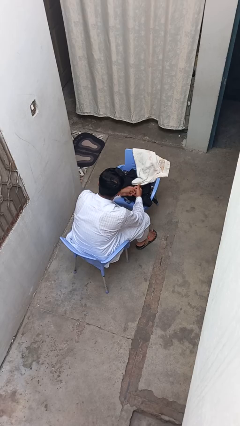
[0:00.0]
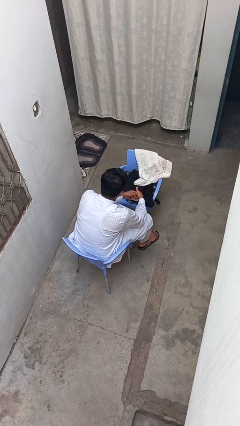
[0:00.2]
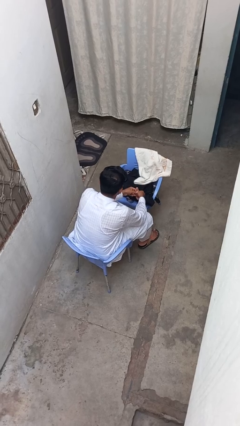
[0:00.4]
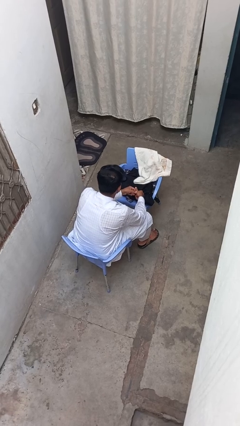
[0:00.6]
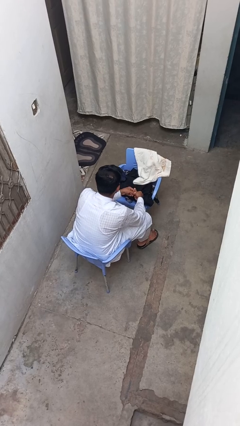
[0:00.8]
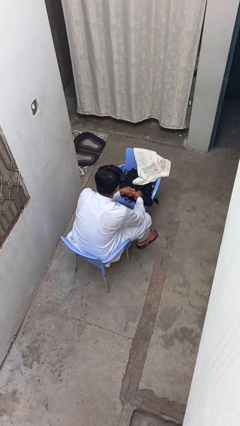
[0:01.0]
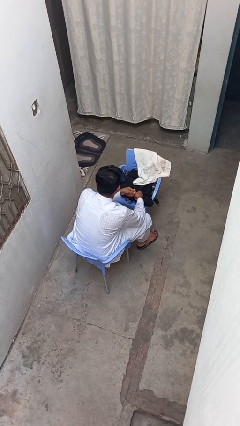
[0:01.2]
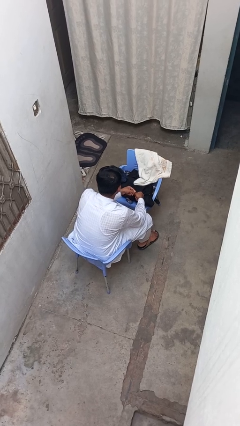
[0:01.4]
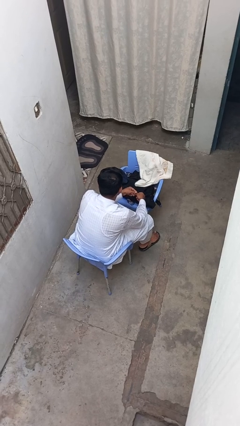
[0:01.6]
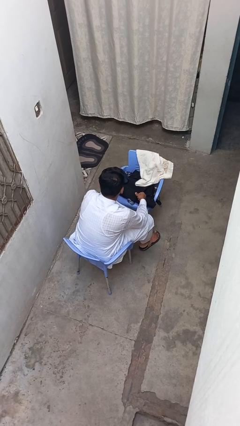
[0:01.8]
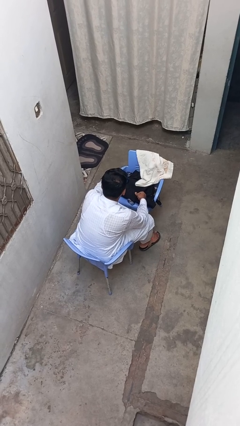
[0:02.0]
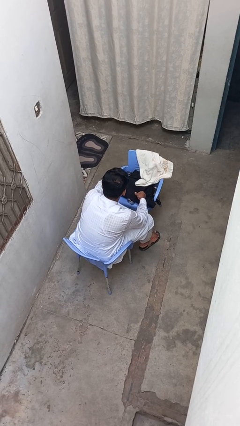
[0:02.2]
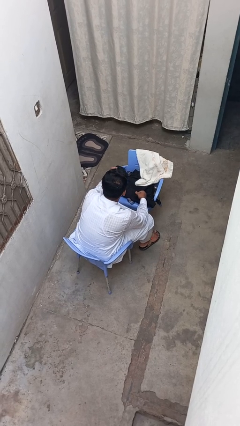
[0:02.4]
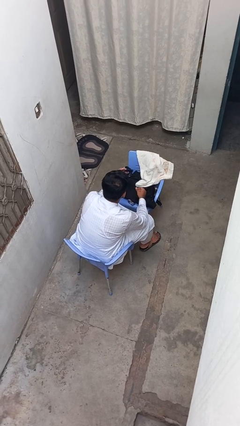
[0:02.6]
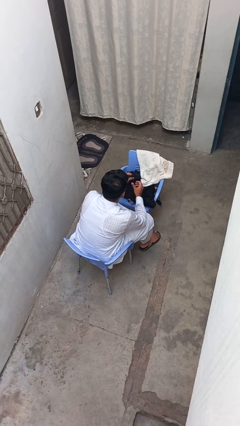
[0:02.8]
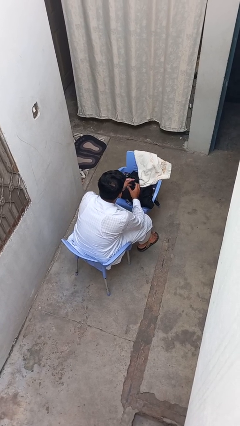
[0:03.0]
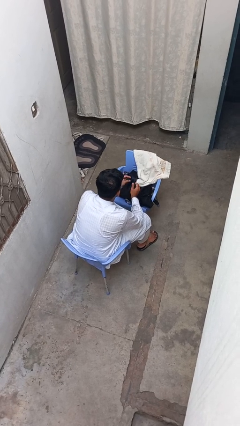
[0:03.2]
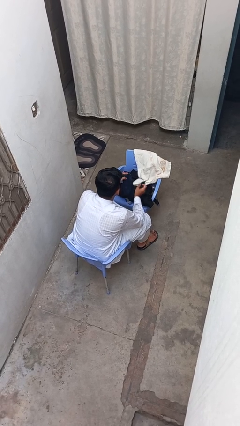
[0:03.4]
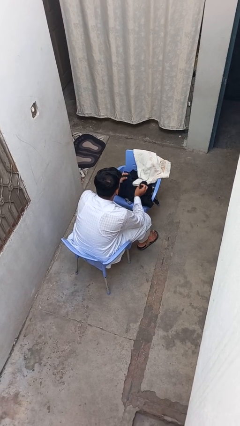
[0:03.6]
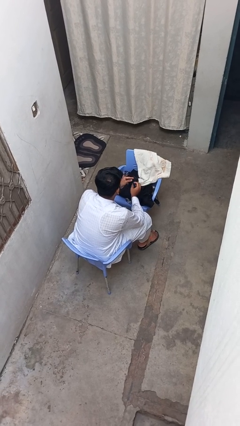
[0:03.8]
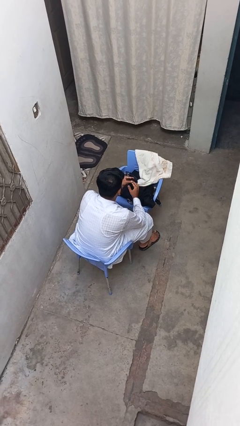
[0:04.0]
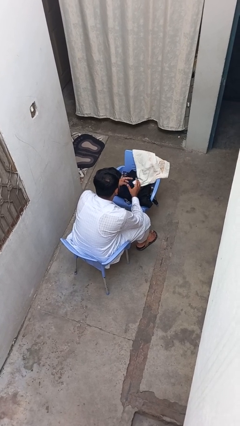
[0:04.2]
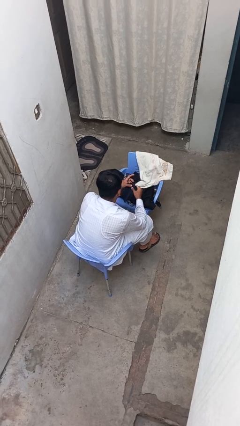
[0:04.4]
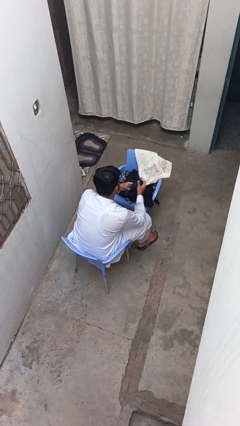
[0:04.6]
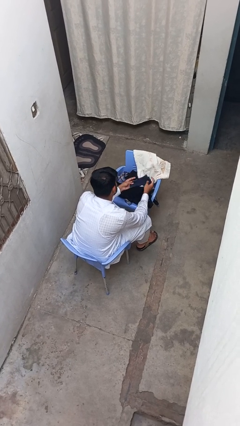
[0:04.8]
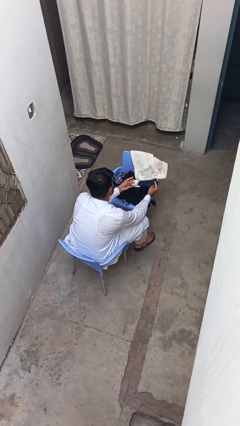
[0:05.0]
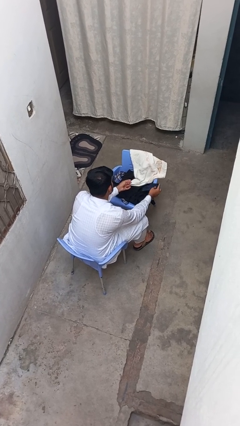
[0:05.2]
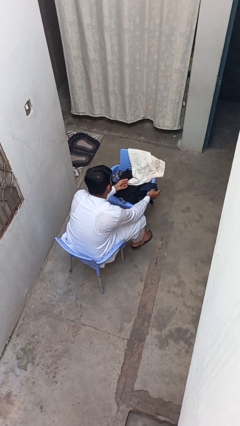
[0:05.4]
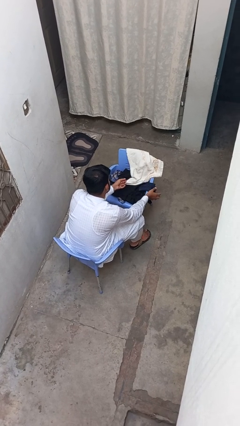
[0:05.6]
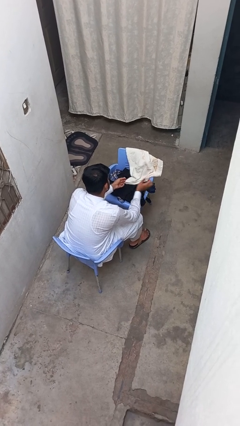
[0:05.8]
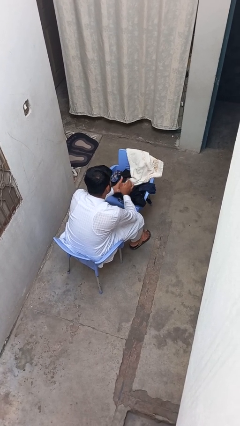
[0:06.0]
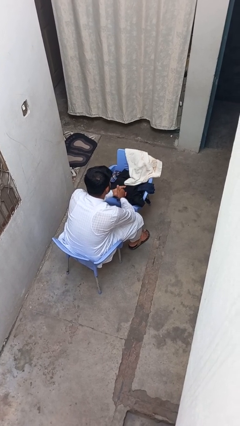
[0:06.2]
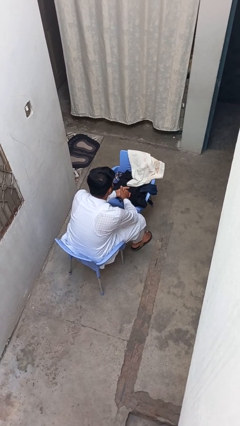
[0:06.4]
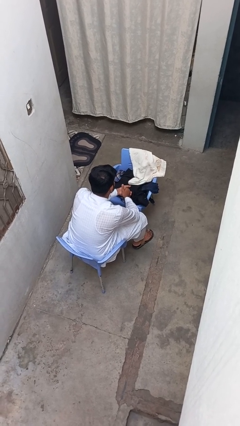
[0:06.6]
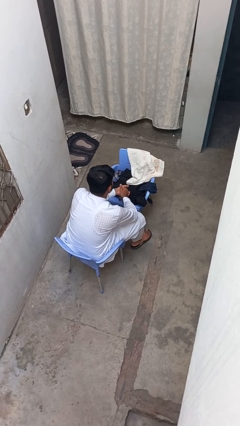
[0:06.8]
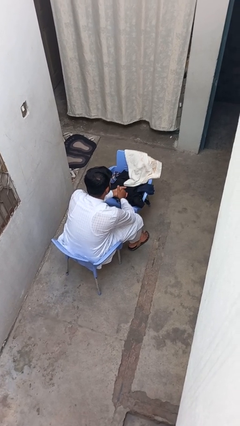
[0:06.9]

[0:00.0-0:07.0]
person folds socks

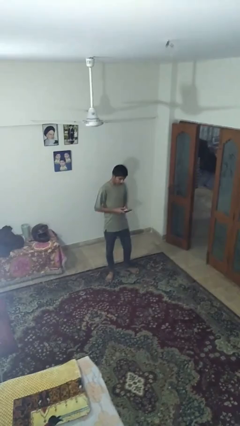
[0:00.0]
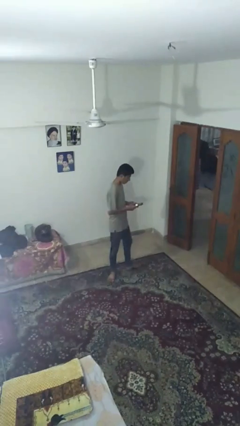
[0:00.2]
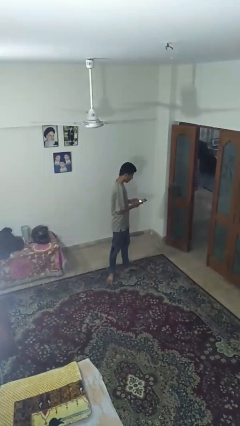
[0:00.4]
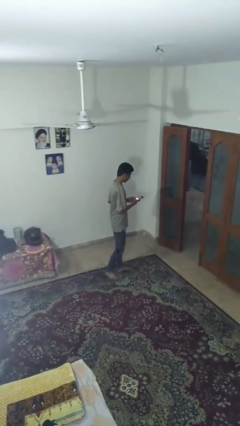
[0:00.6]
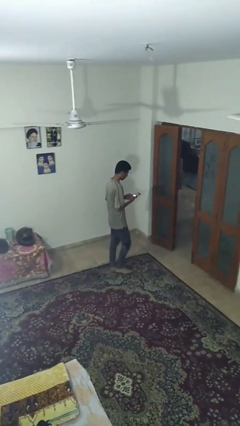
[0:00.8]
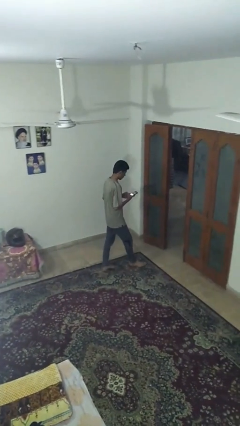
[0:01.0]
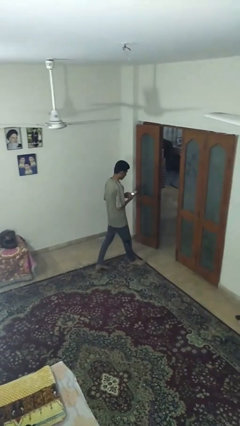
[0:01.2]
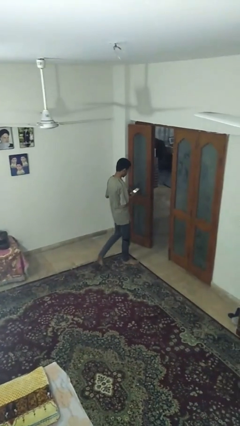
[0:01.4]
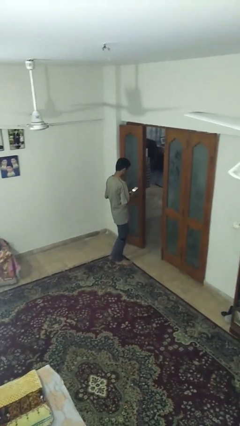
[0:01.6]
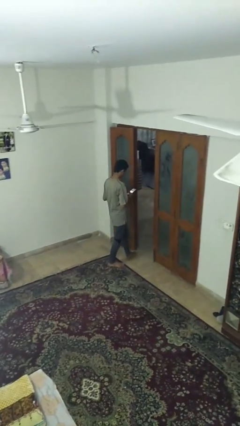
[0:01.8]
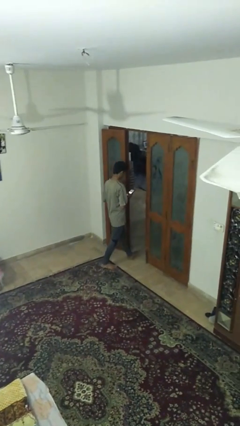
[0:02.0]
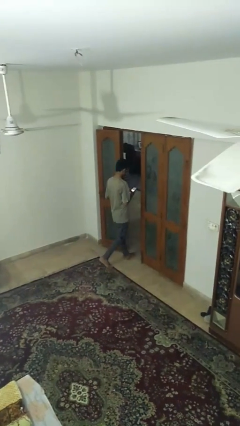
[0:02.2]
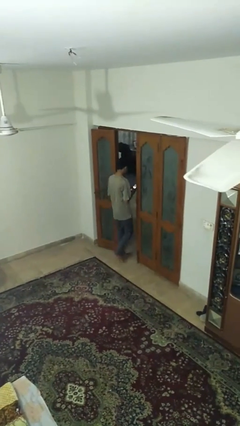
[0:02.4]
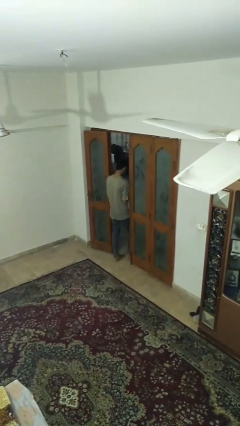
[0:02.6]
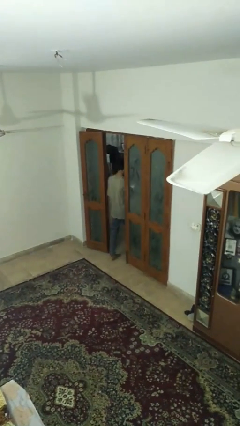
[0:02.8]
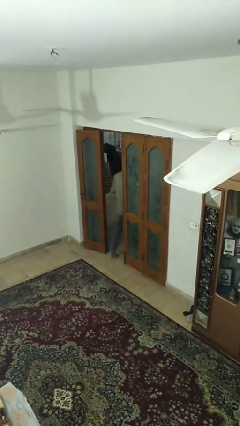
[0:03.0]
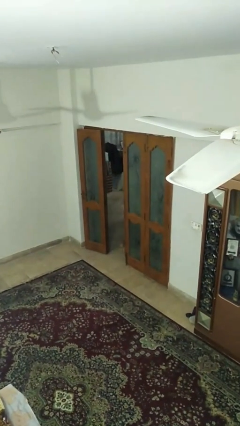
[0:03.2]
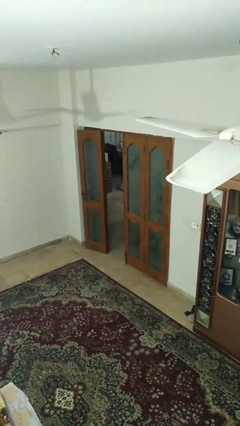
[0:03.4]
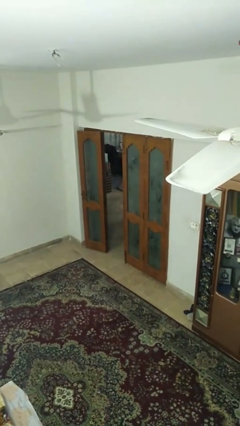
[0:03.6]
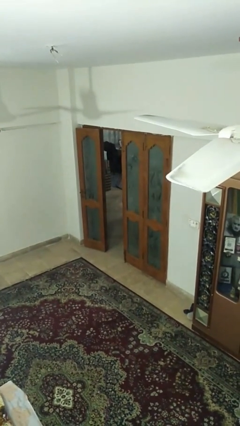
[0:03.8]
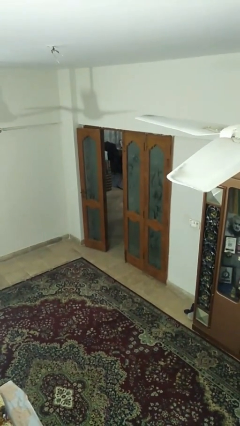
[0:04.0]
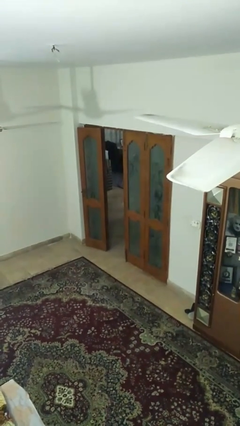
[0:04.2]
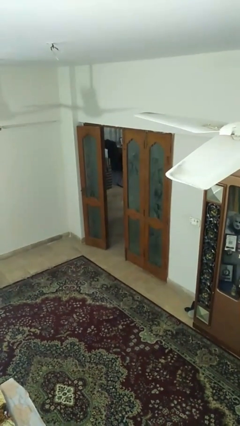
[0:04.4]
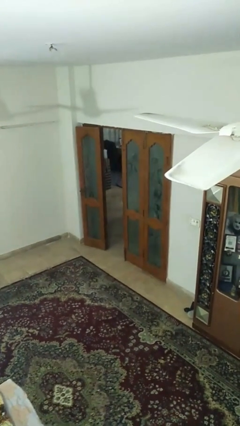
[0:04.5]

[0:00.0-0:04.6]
person exits scene through structure

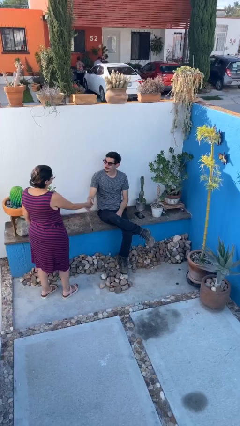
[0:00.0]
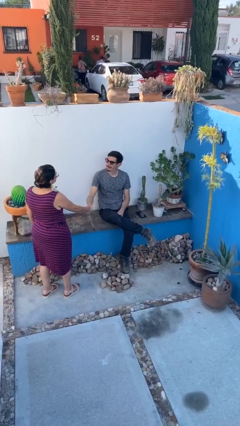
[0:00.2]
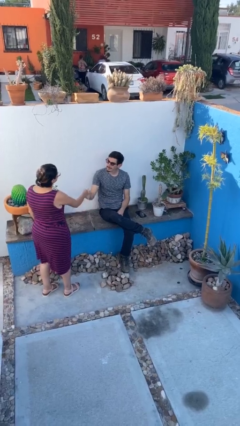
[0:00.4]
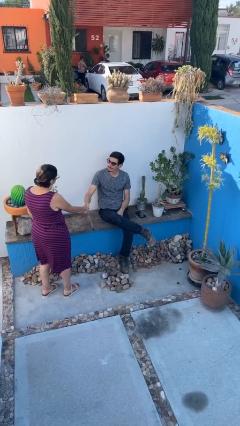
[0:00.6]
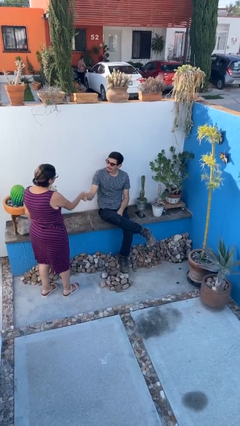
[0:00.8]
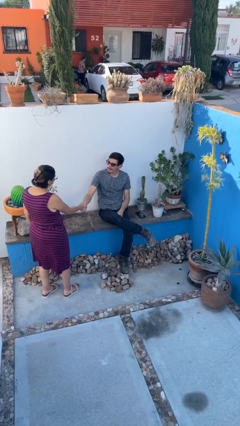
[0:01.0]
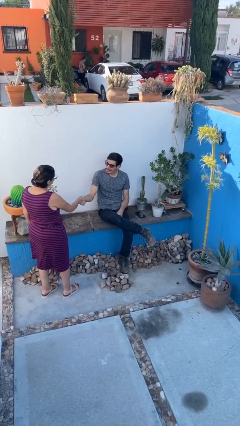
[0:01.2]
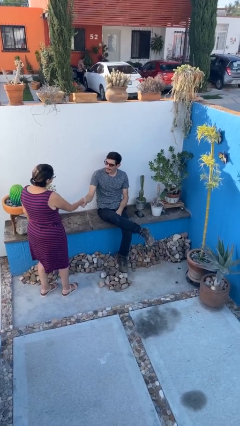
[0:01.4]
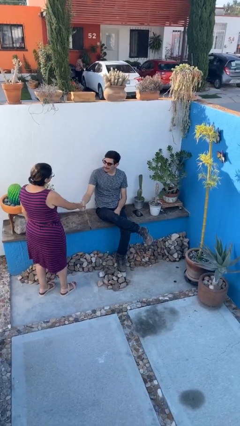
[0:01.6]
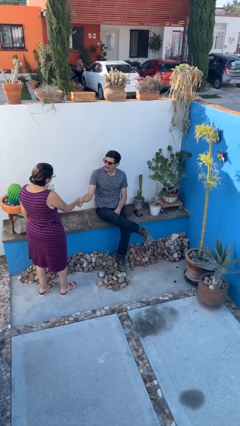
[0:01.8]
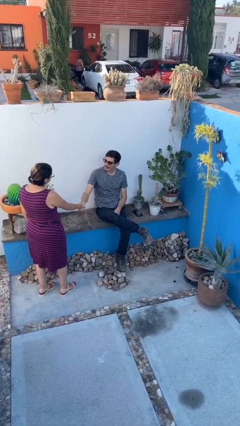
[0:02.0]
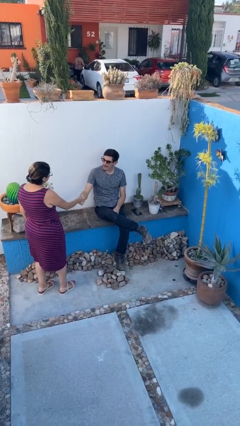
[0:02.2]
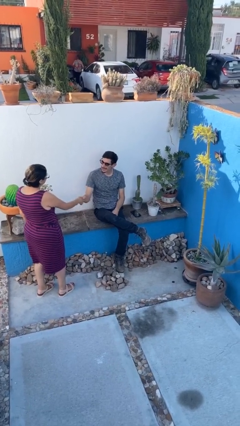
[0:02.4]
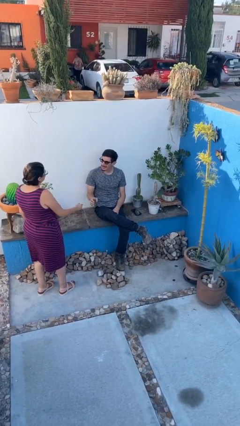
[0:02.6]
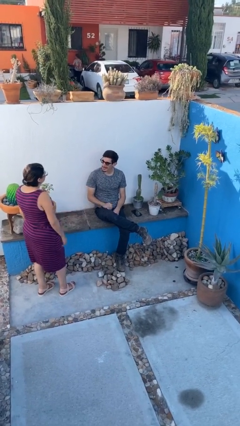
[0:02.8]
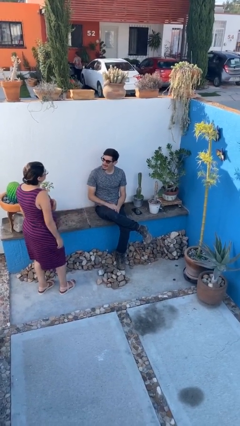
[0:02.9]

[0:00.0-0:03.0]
person shakes hand

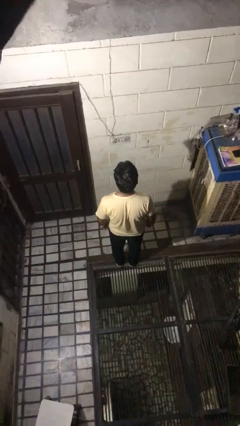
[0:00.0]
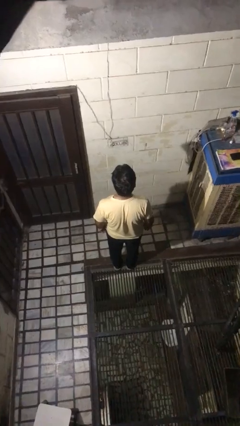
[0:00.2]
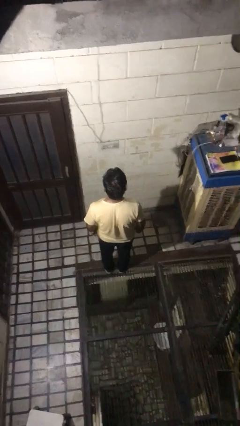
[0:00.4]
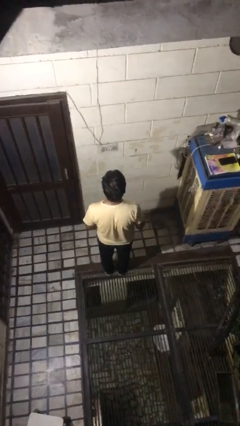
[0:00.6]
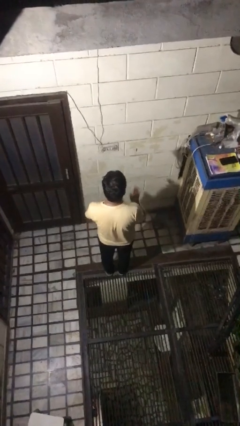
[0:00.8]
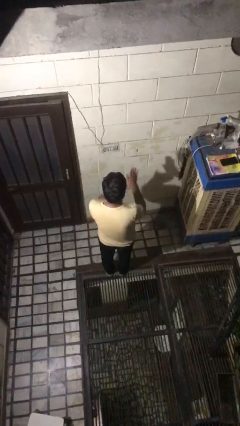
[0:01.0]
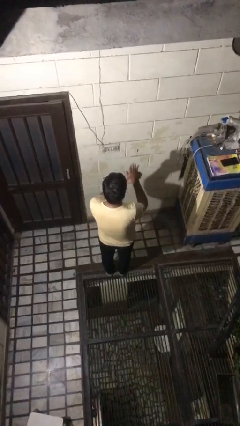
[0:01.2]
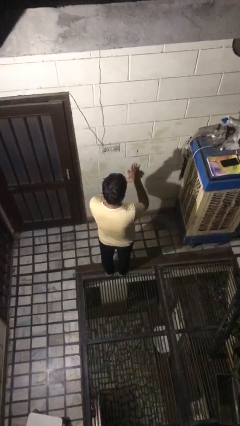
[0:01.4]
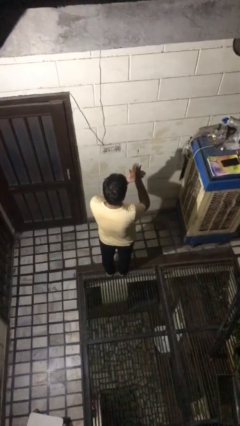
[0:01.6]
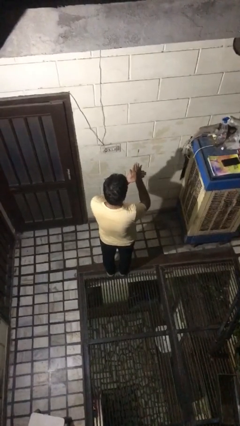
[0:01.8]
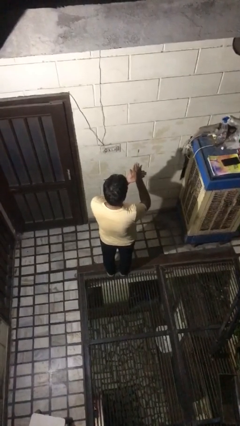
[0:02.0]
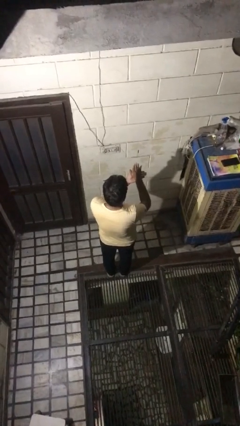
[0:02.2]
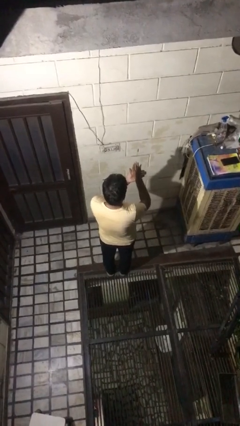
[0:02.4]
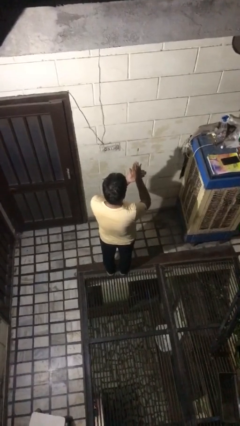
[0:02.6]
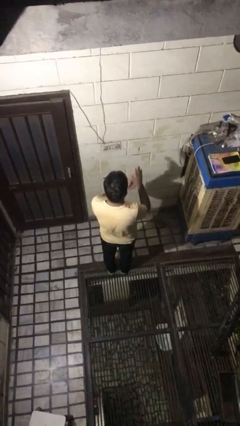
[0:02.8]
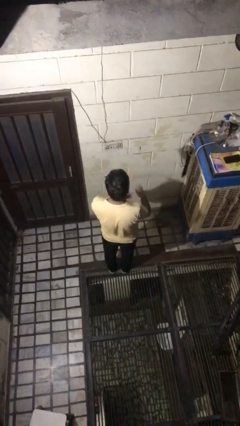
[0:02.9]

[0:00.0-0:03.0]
person gestures number five

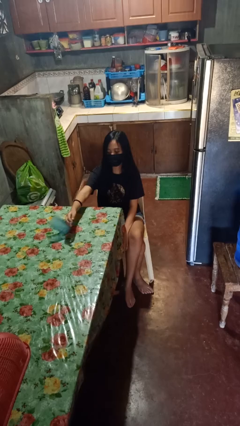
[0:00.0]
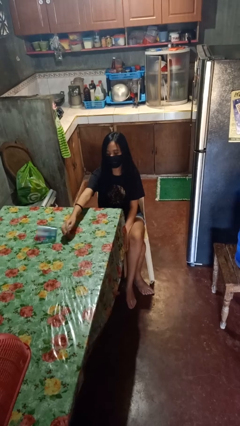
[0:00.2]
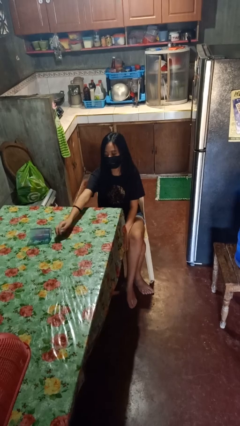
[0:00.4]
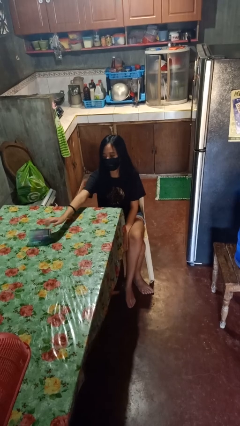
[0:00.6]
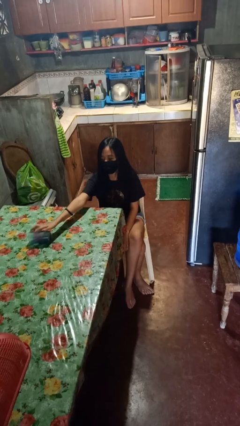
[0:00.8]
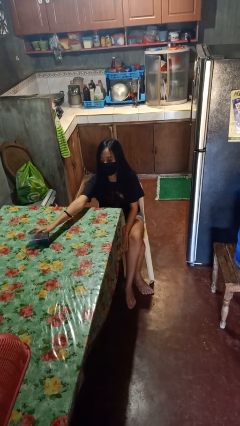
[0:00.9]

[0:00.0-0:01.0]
person knocks over glass
